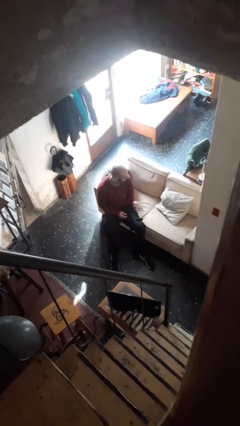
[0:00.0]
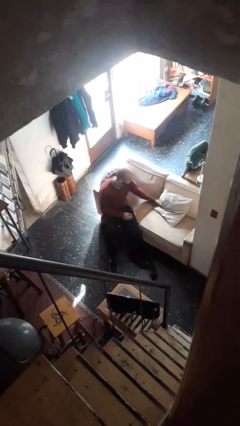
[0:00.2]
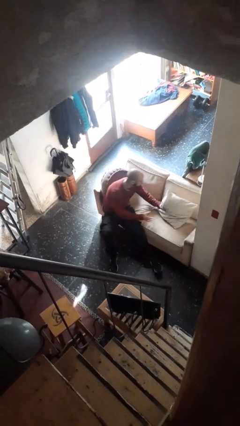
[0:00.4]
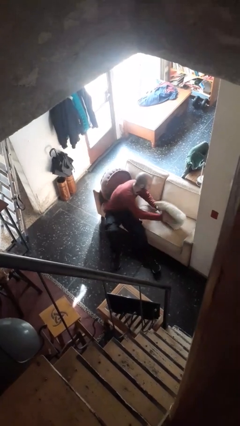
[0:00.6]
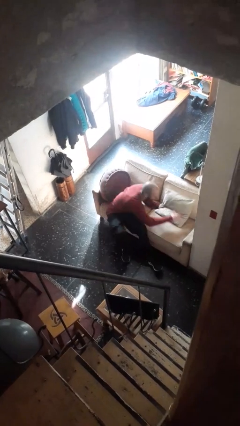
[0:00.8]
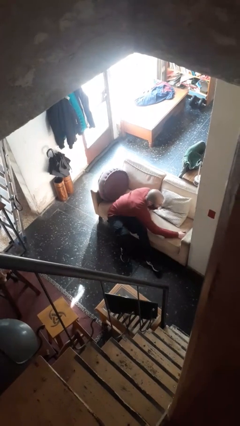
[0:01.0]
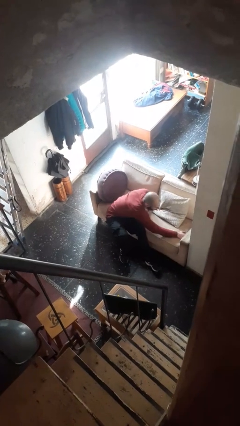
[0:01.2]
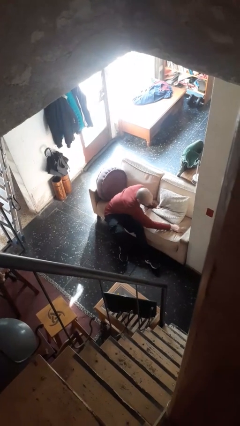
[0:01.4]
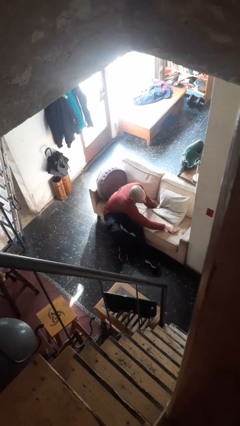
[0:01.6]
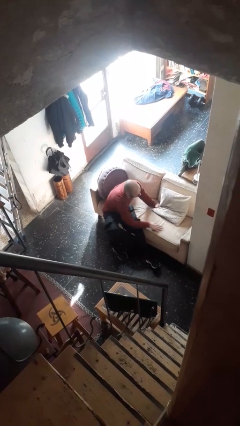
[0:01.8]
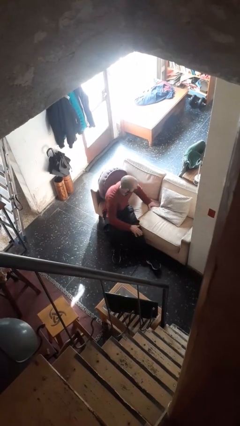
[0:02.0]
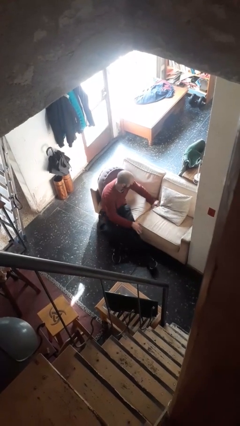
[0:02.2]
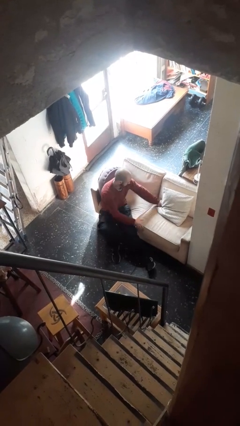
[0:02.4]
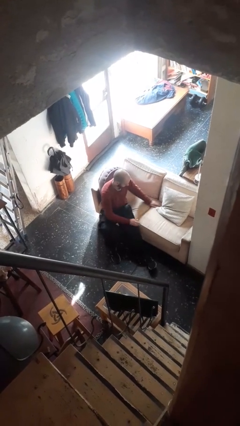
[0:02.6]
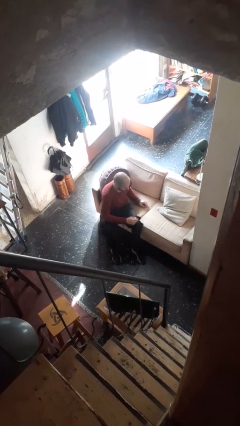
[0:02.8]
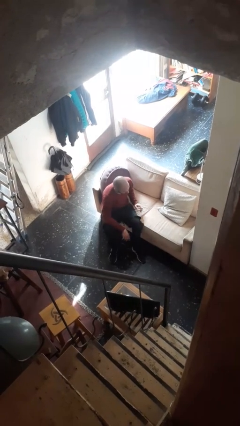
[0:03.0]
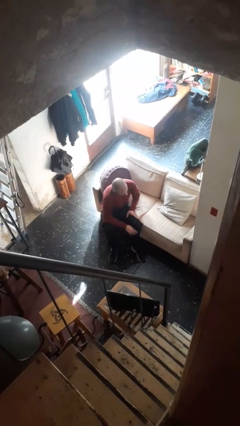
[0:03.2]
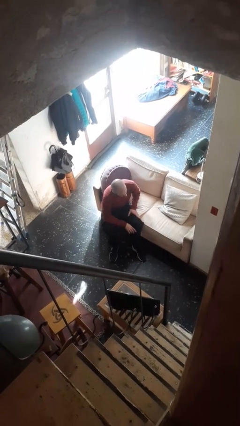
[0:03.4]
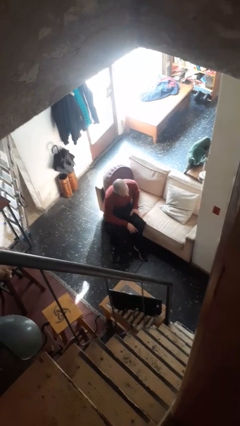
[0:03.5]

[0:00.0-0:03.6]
person searches in couch

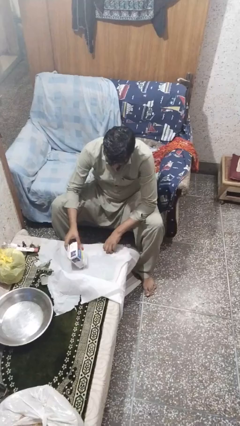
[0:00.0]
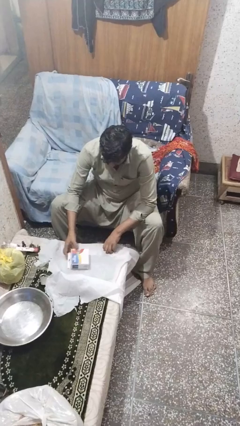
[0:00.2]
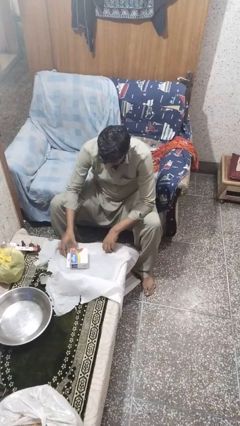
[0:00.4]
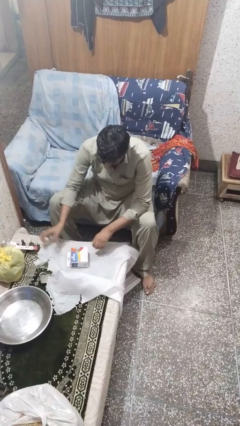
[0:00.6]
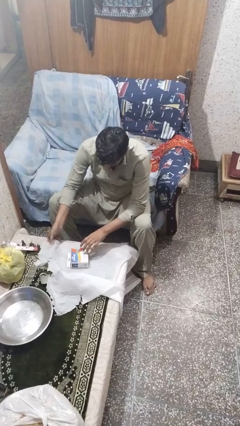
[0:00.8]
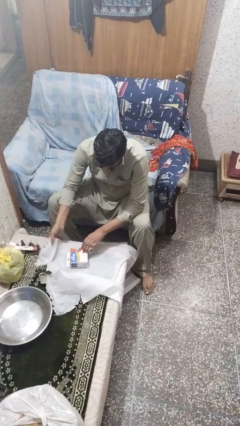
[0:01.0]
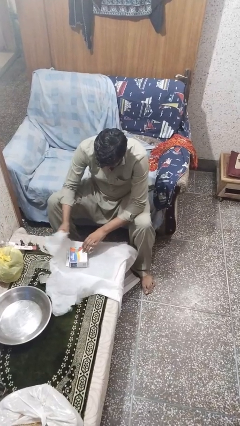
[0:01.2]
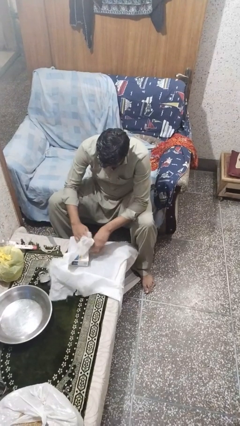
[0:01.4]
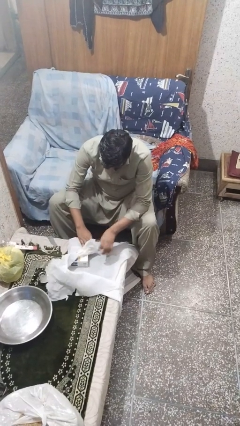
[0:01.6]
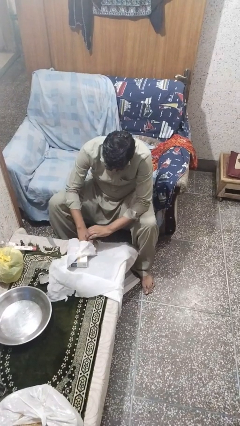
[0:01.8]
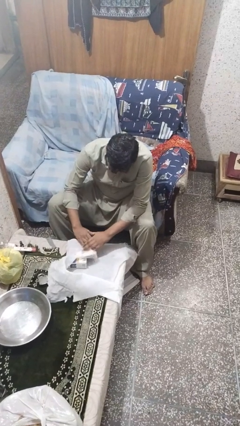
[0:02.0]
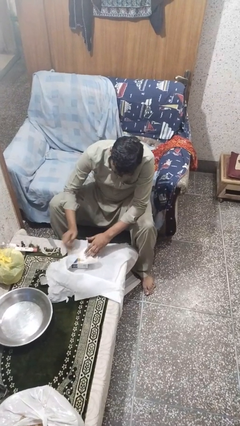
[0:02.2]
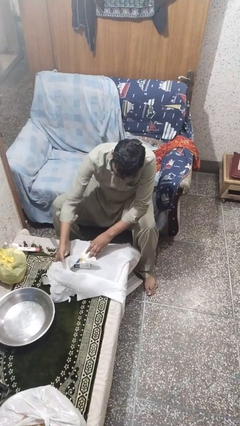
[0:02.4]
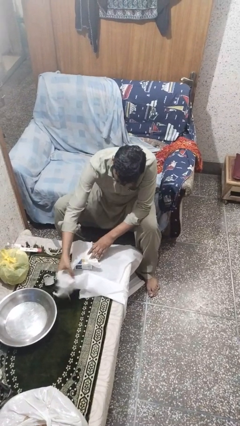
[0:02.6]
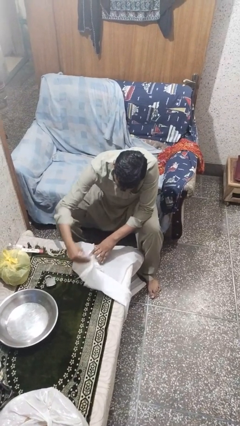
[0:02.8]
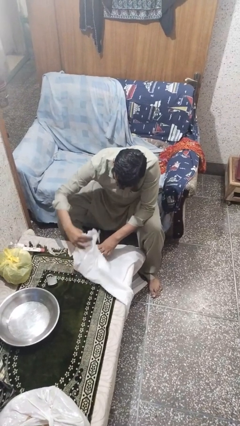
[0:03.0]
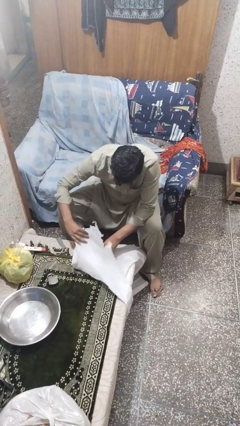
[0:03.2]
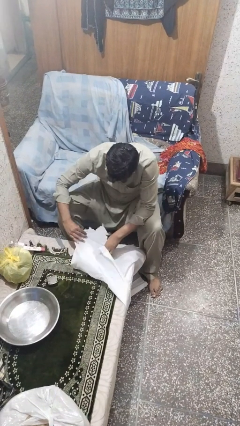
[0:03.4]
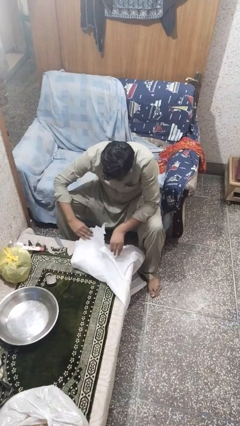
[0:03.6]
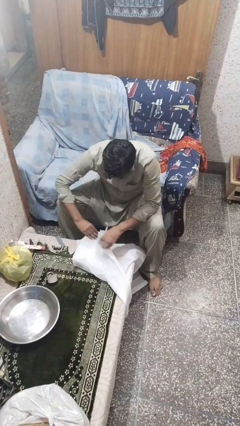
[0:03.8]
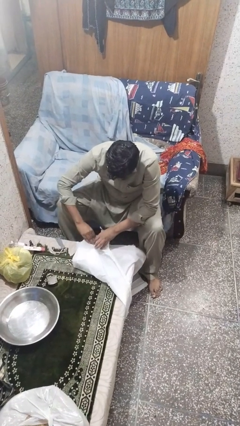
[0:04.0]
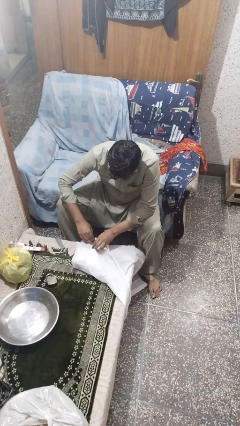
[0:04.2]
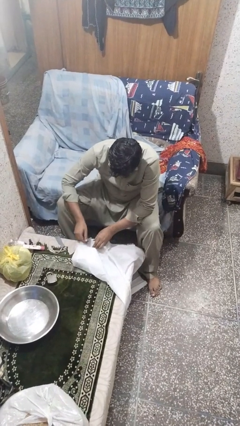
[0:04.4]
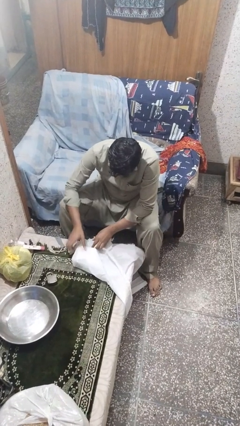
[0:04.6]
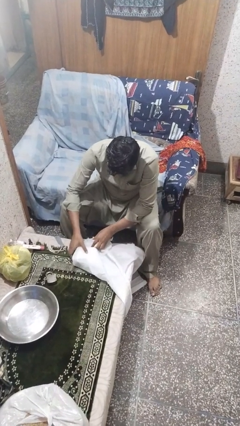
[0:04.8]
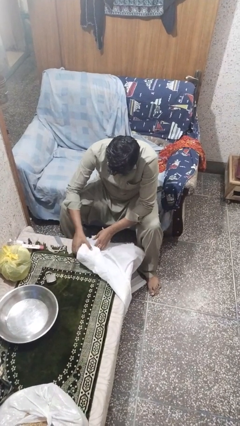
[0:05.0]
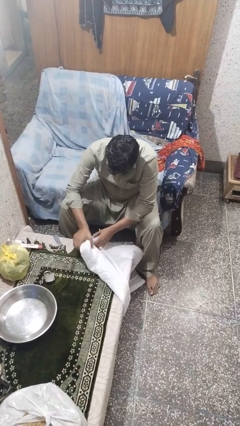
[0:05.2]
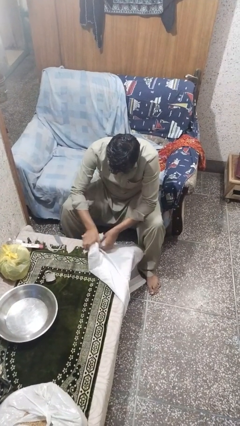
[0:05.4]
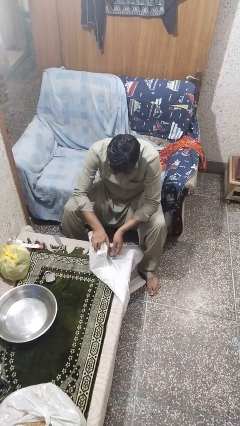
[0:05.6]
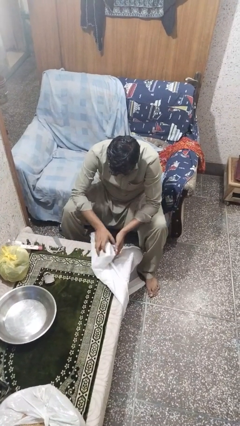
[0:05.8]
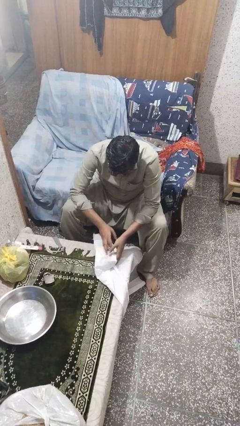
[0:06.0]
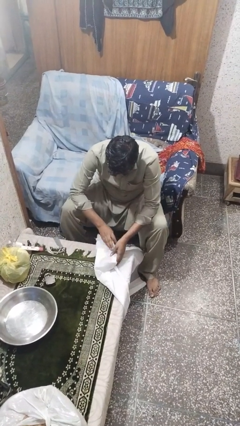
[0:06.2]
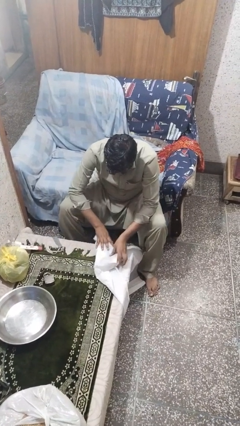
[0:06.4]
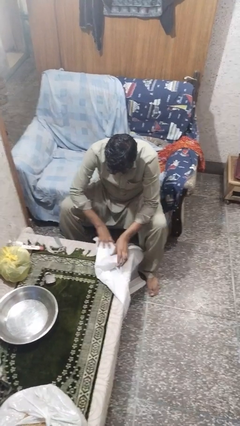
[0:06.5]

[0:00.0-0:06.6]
person wraps box

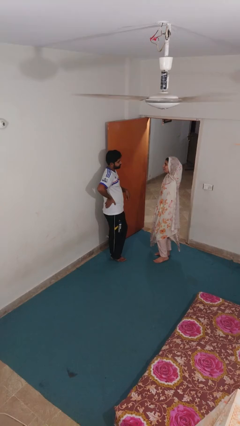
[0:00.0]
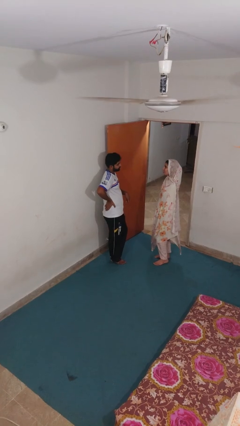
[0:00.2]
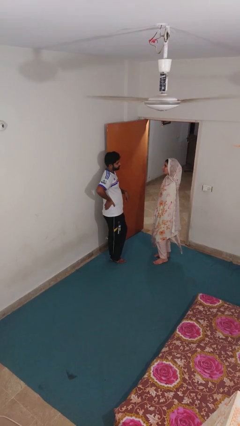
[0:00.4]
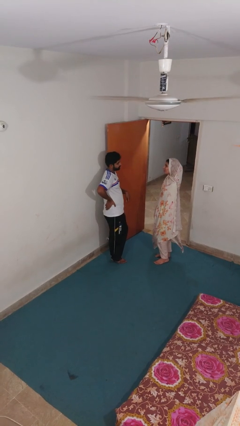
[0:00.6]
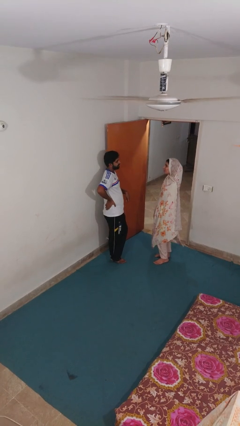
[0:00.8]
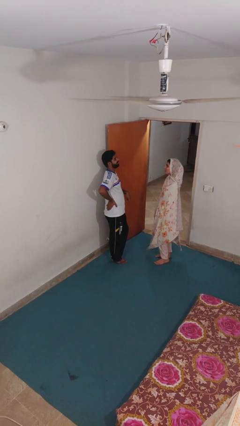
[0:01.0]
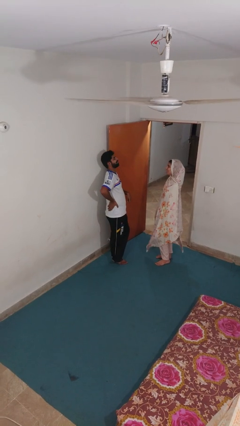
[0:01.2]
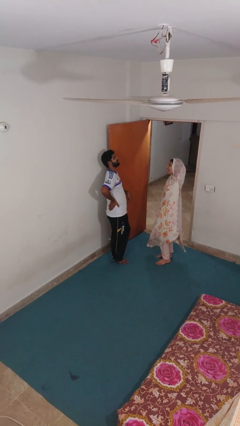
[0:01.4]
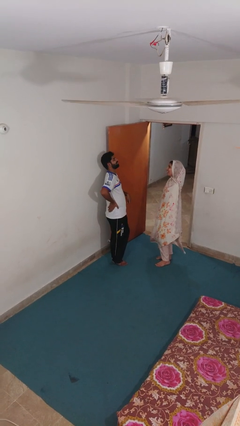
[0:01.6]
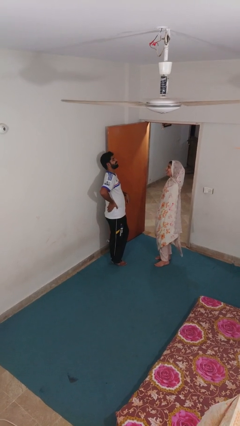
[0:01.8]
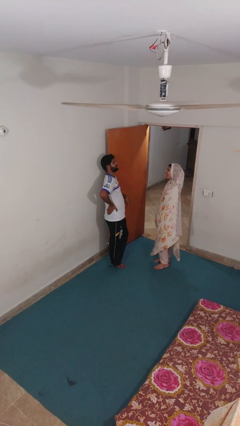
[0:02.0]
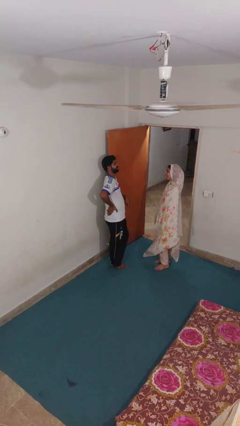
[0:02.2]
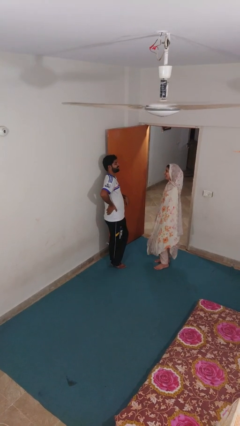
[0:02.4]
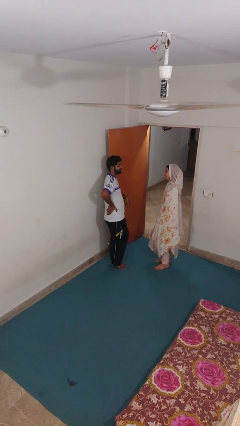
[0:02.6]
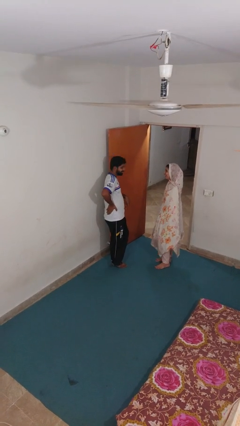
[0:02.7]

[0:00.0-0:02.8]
person laughs with person

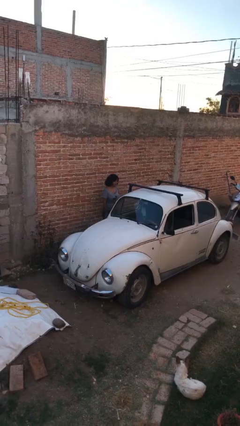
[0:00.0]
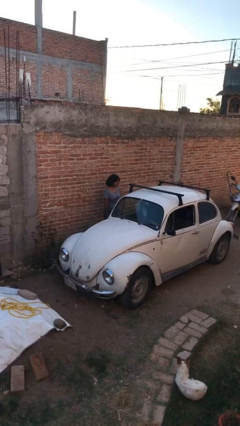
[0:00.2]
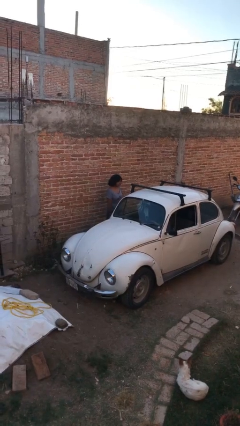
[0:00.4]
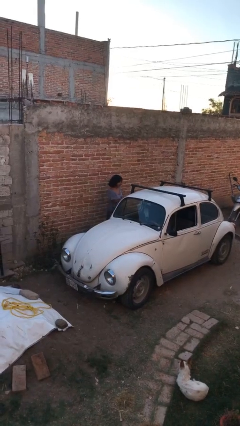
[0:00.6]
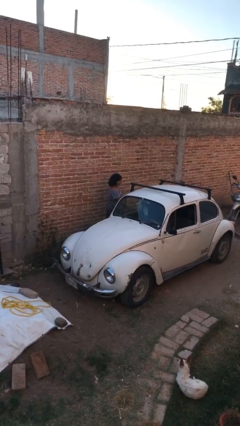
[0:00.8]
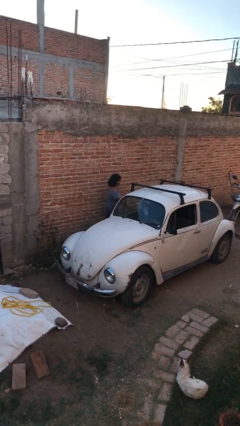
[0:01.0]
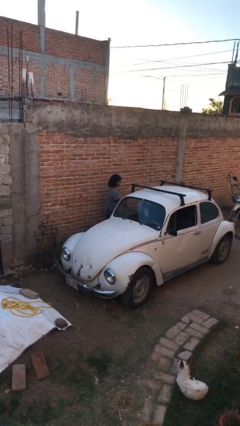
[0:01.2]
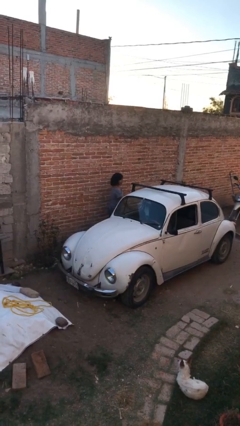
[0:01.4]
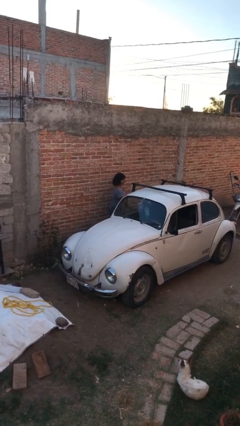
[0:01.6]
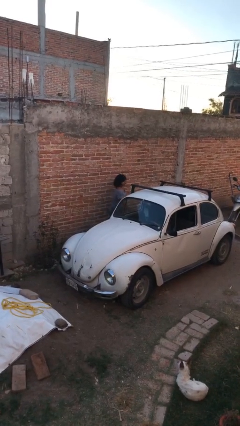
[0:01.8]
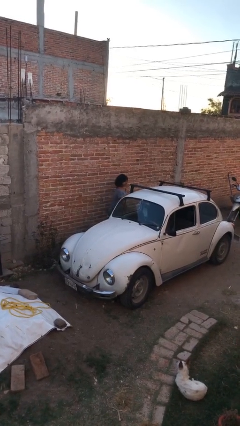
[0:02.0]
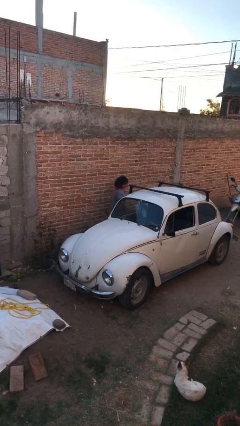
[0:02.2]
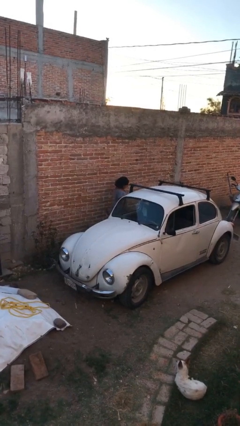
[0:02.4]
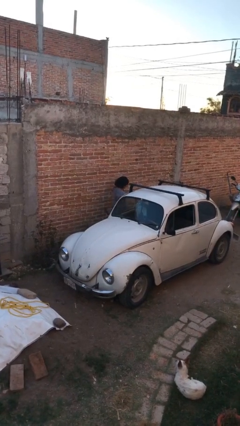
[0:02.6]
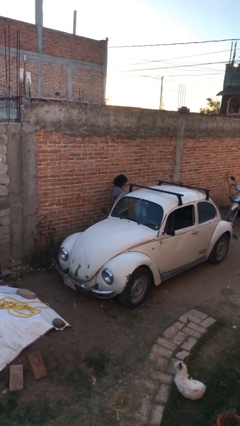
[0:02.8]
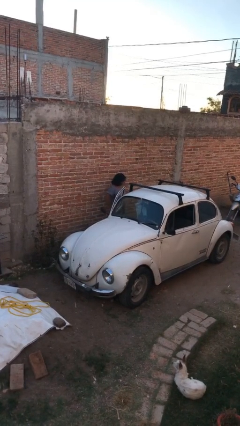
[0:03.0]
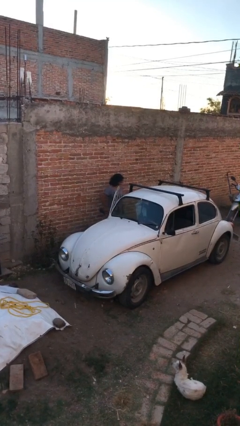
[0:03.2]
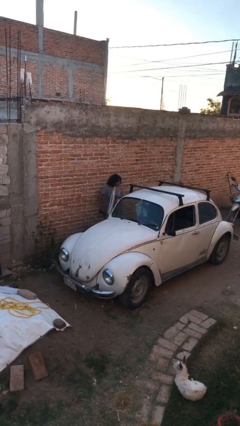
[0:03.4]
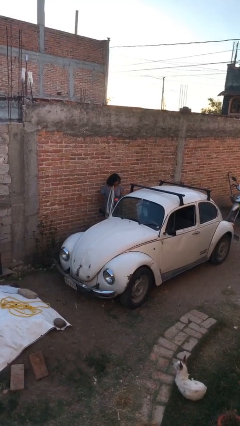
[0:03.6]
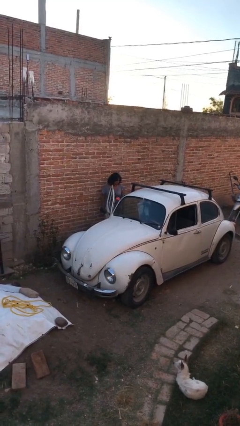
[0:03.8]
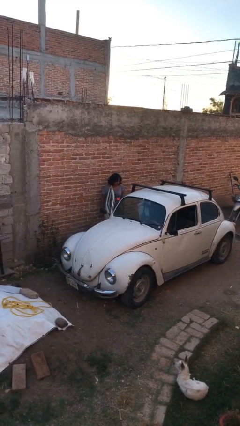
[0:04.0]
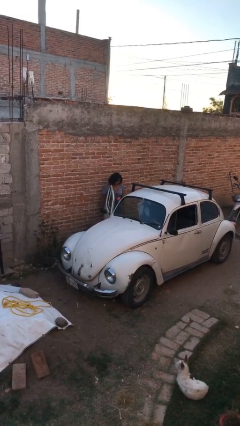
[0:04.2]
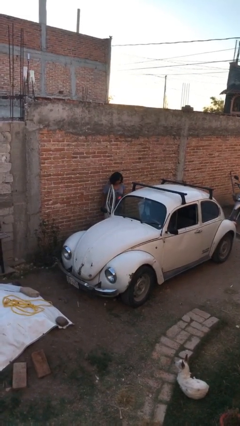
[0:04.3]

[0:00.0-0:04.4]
person opens car door

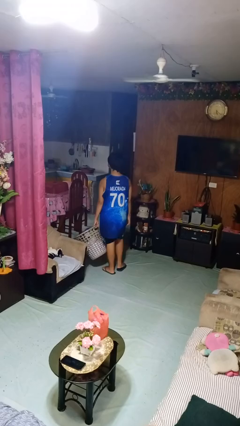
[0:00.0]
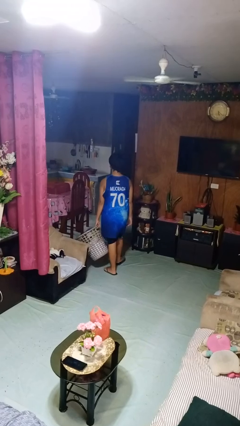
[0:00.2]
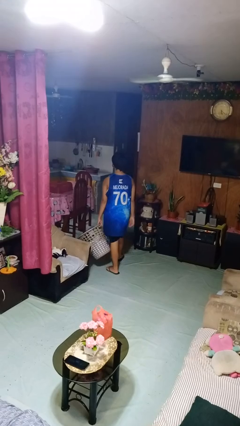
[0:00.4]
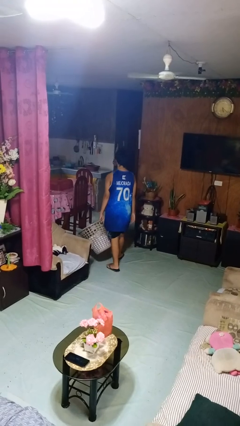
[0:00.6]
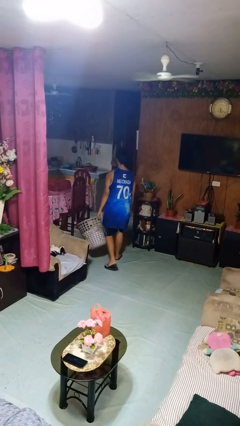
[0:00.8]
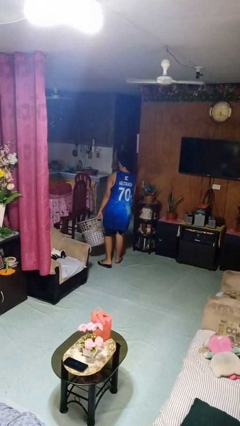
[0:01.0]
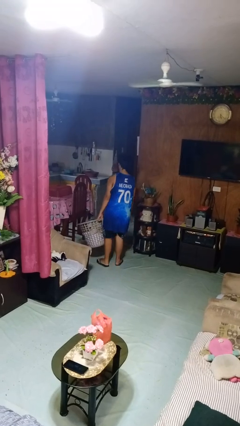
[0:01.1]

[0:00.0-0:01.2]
person carries laundry basket
